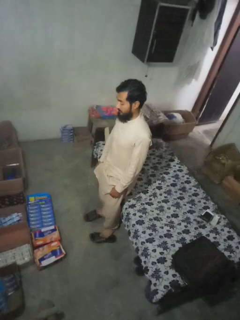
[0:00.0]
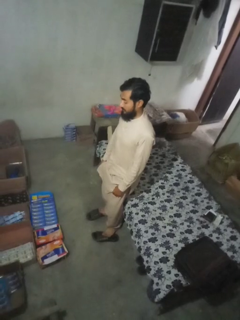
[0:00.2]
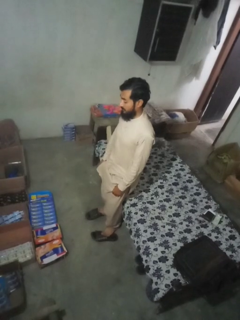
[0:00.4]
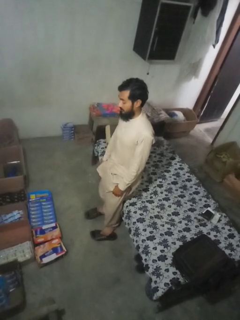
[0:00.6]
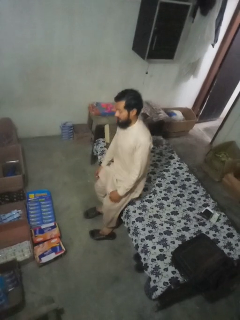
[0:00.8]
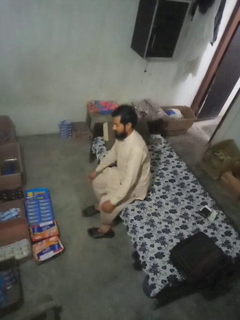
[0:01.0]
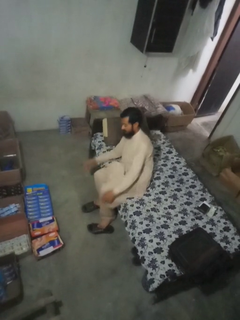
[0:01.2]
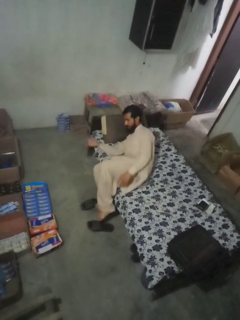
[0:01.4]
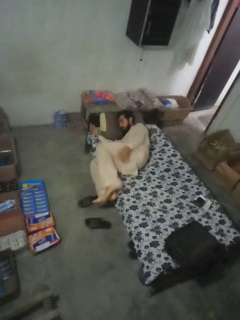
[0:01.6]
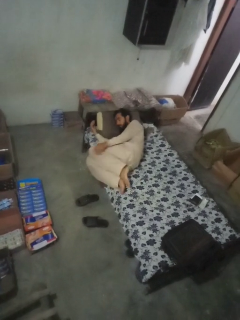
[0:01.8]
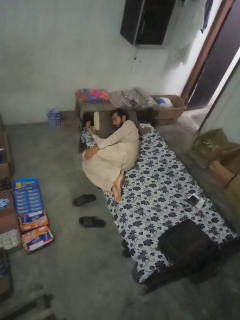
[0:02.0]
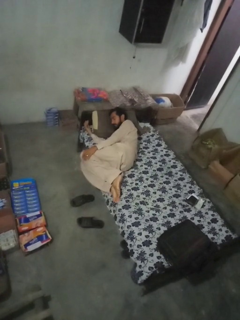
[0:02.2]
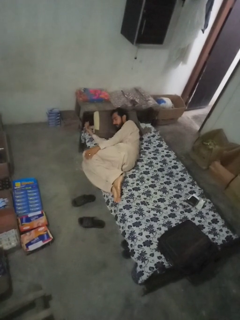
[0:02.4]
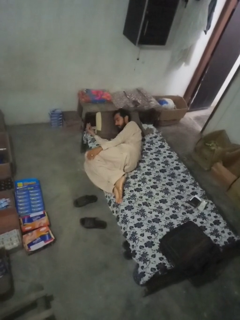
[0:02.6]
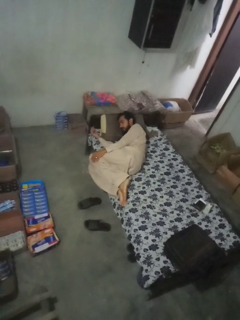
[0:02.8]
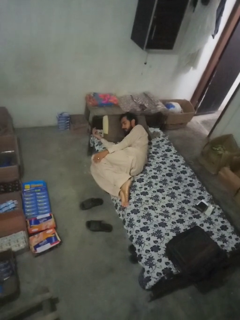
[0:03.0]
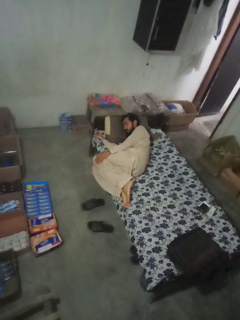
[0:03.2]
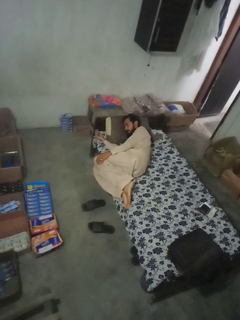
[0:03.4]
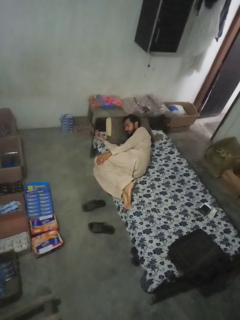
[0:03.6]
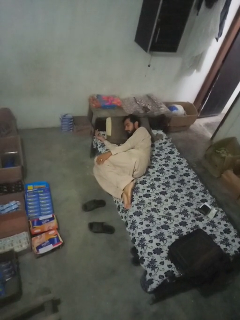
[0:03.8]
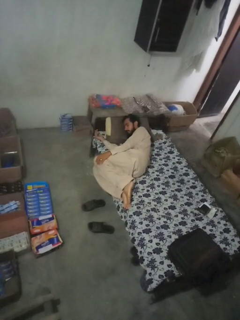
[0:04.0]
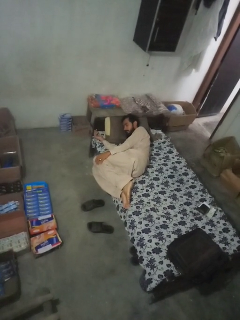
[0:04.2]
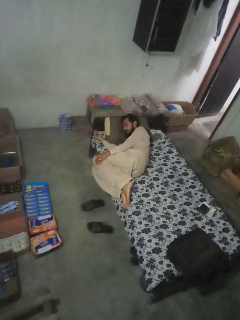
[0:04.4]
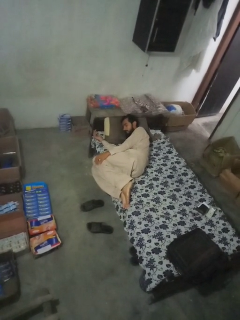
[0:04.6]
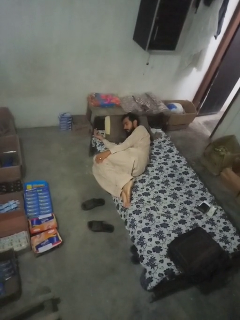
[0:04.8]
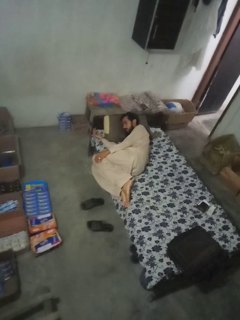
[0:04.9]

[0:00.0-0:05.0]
person lies down on bed

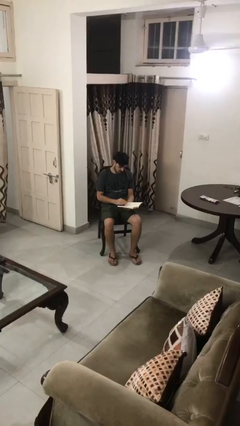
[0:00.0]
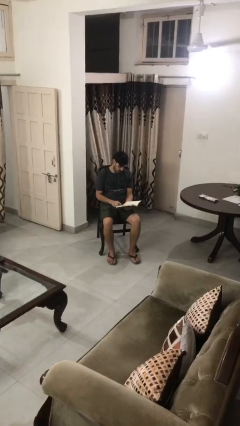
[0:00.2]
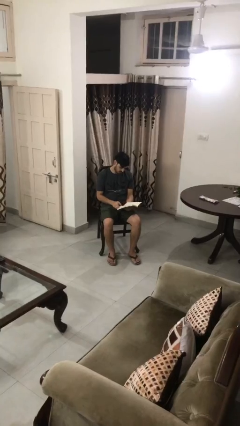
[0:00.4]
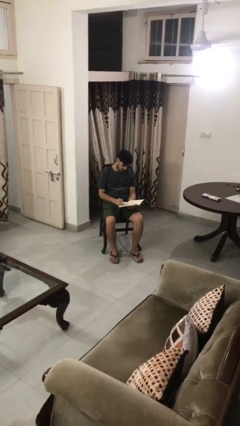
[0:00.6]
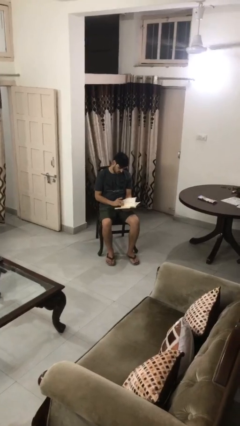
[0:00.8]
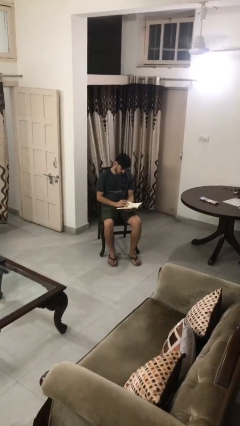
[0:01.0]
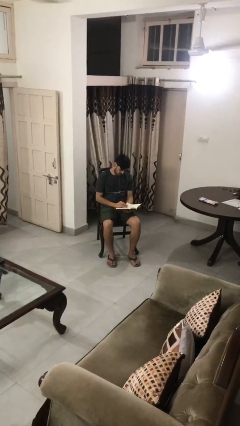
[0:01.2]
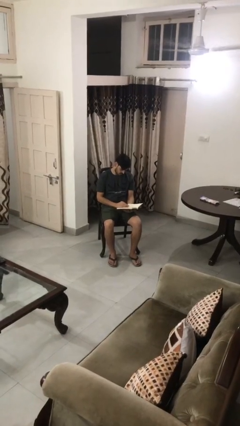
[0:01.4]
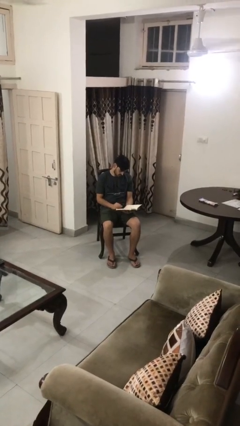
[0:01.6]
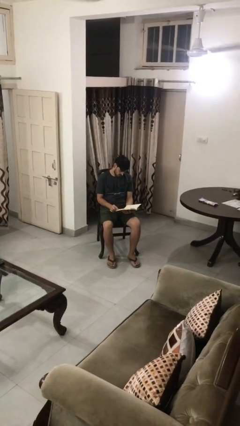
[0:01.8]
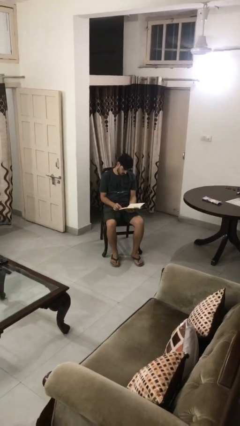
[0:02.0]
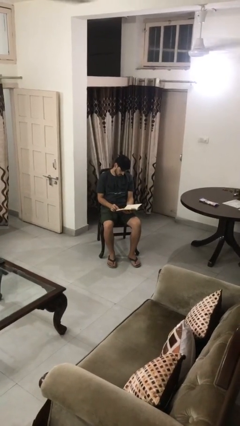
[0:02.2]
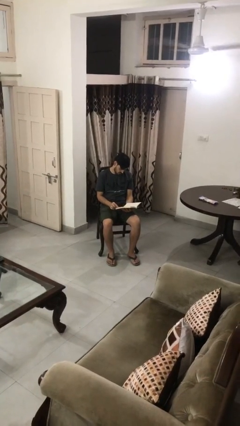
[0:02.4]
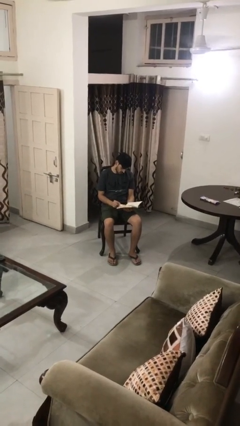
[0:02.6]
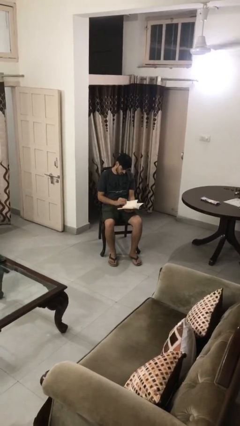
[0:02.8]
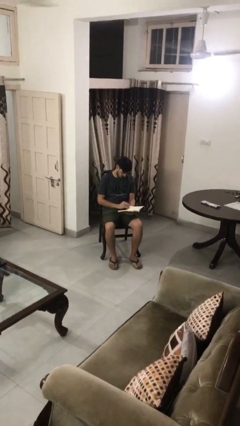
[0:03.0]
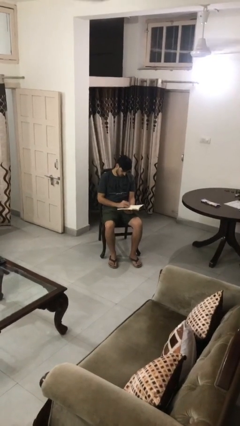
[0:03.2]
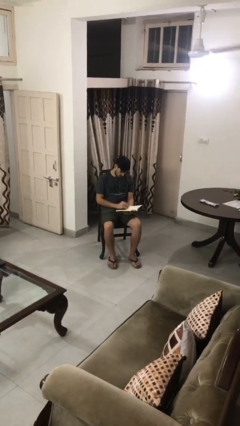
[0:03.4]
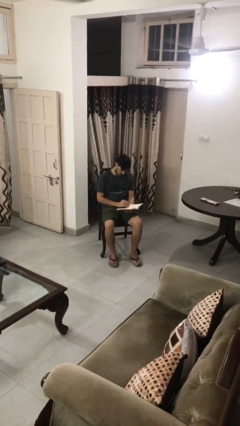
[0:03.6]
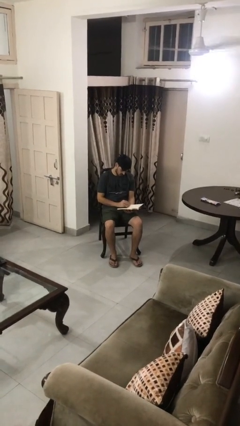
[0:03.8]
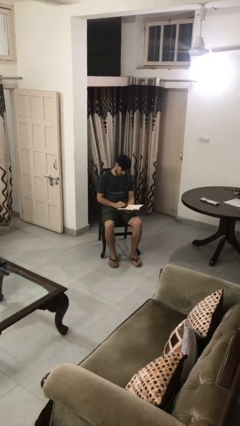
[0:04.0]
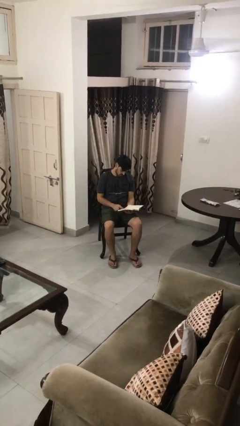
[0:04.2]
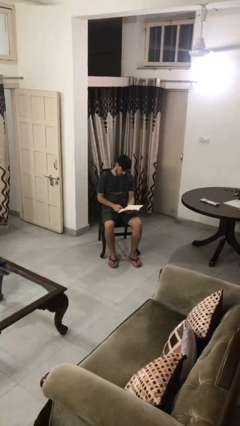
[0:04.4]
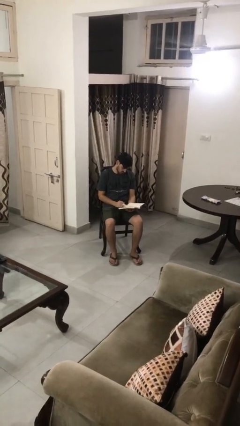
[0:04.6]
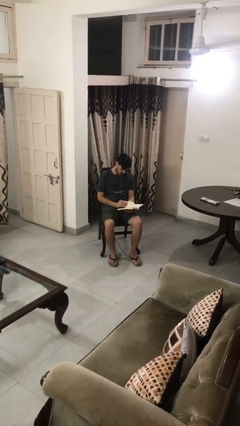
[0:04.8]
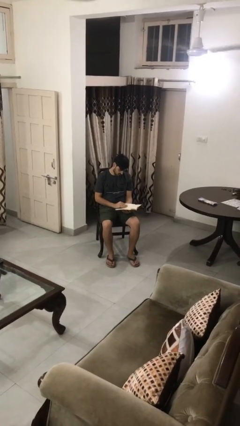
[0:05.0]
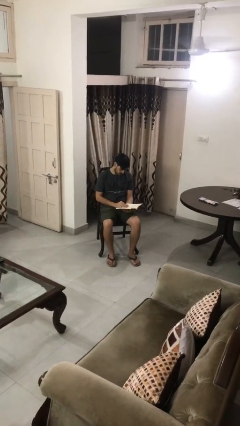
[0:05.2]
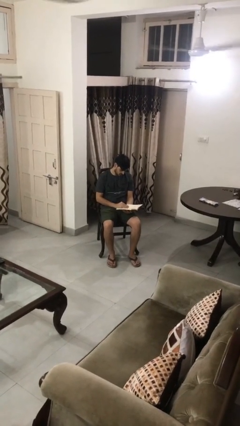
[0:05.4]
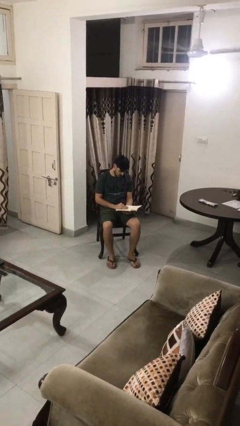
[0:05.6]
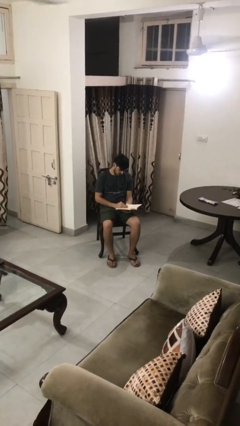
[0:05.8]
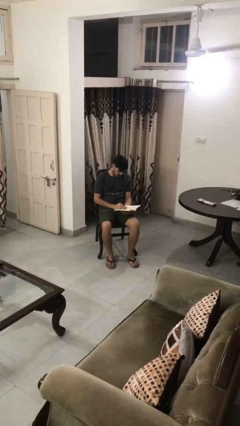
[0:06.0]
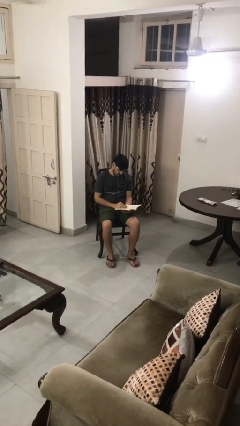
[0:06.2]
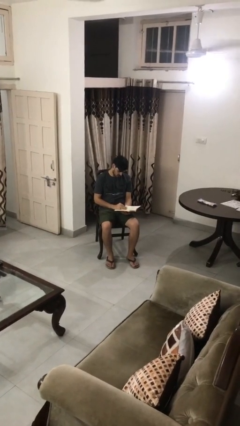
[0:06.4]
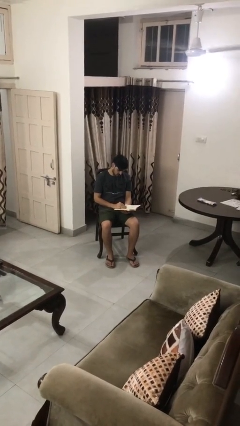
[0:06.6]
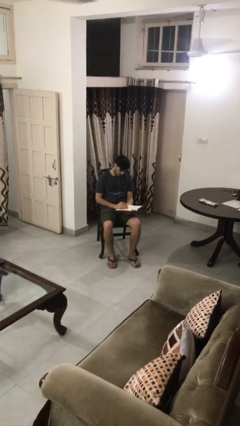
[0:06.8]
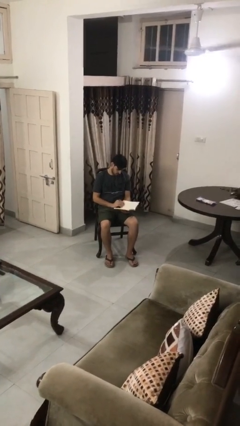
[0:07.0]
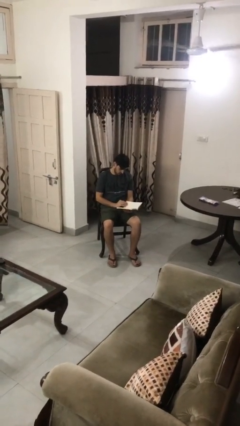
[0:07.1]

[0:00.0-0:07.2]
person reads book

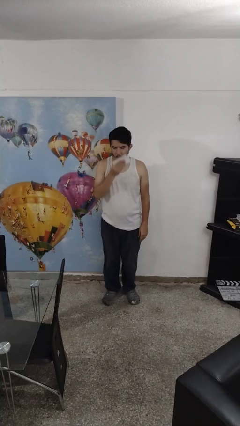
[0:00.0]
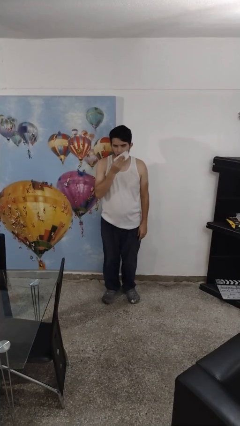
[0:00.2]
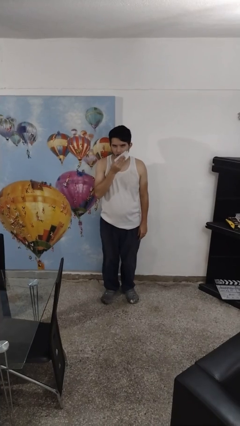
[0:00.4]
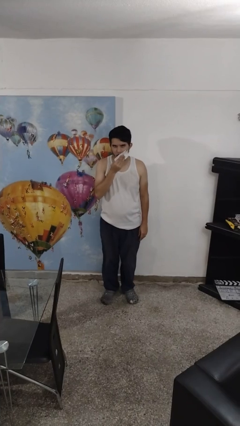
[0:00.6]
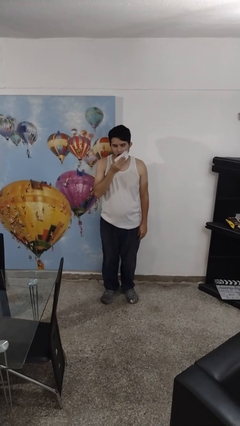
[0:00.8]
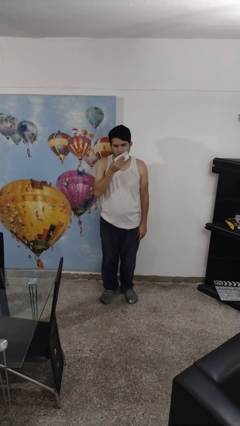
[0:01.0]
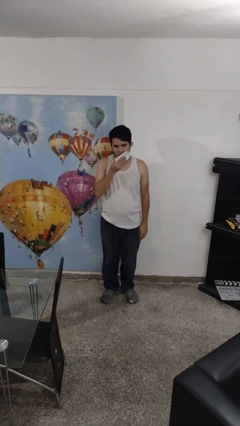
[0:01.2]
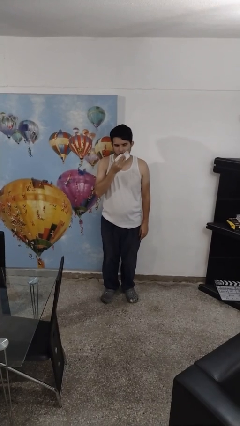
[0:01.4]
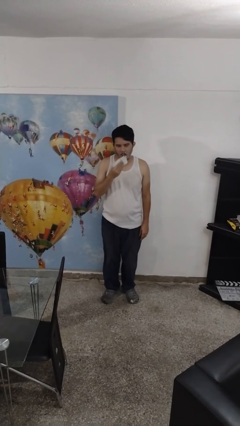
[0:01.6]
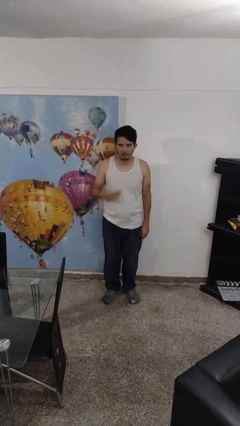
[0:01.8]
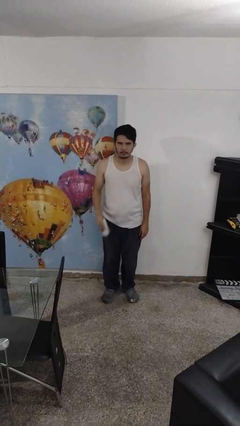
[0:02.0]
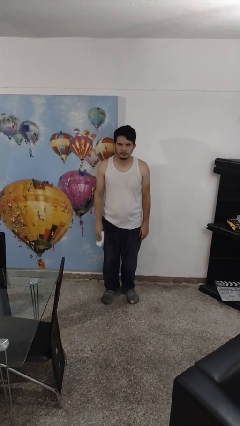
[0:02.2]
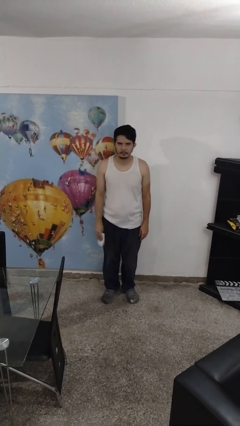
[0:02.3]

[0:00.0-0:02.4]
person wipes mouth with napkin

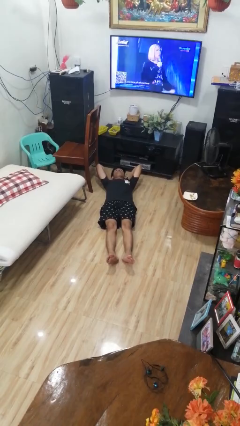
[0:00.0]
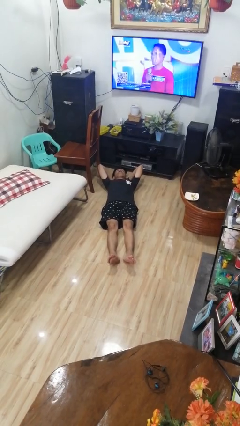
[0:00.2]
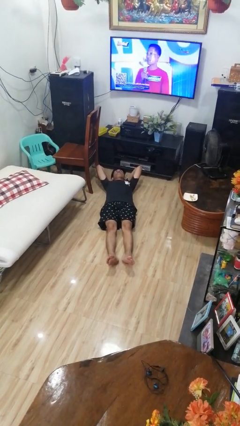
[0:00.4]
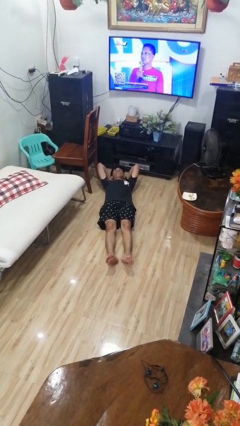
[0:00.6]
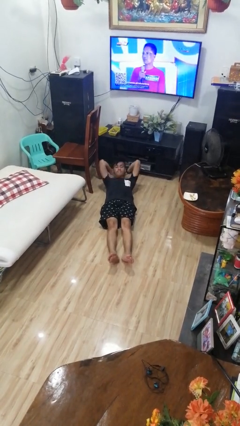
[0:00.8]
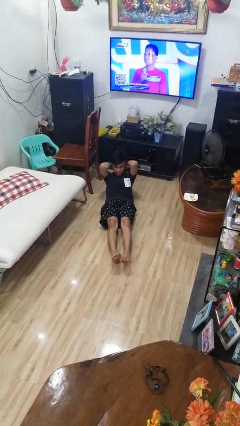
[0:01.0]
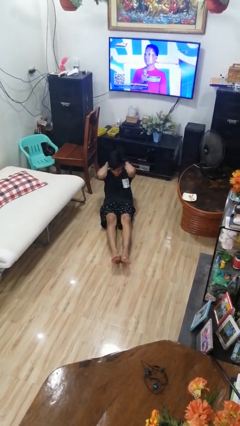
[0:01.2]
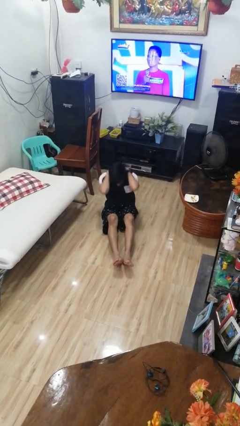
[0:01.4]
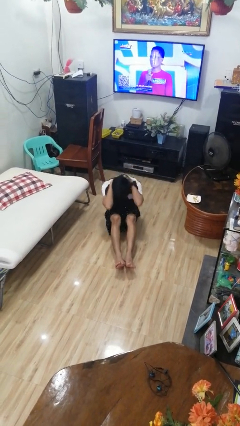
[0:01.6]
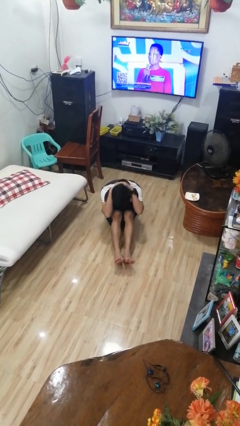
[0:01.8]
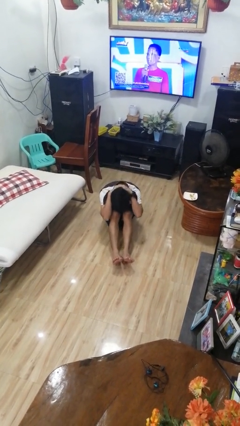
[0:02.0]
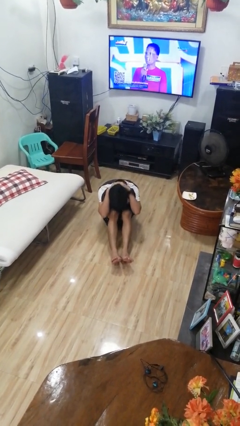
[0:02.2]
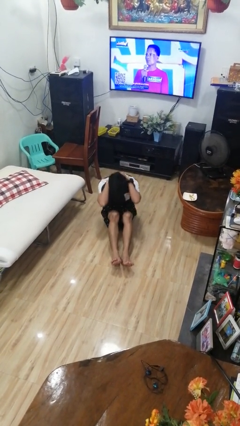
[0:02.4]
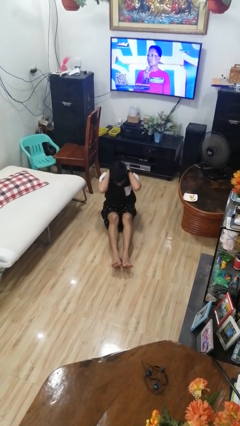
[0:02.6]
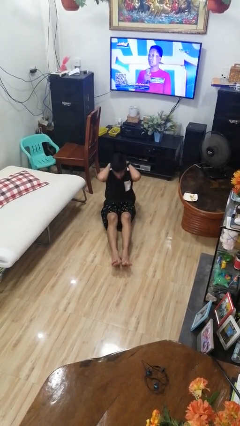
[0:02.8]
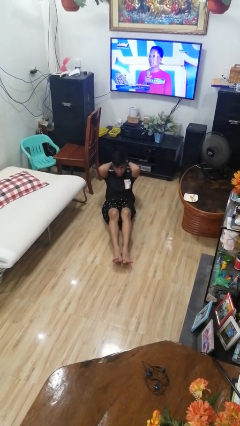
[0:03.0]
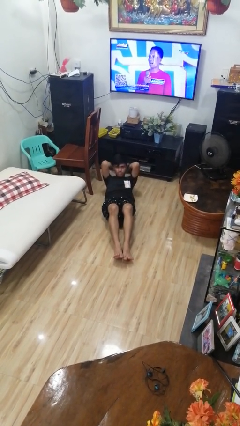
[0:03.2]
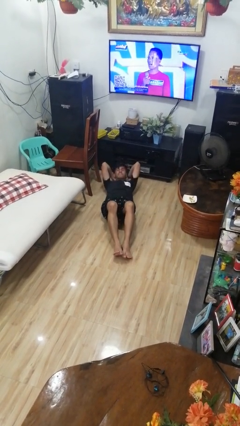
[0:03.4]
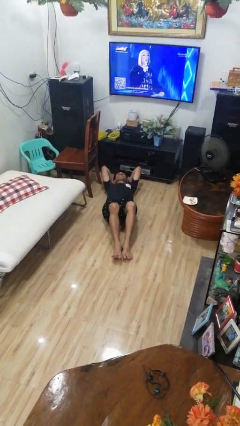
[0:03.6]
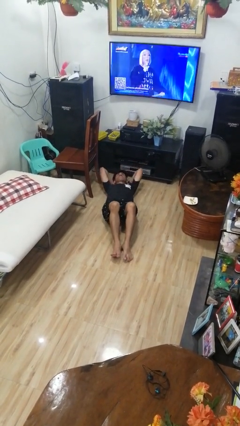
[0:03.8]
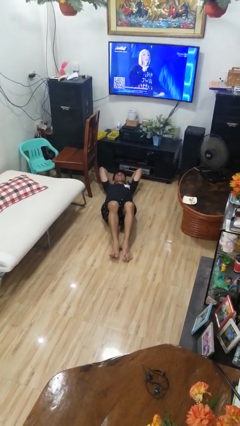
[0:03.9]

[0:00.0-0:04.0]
person exercises with situp
